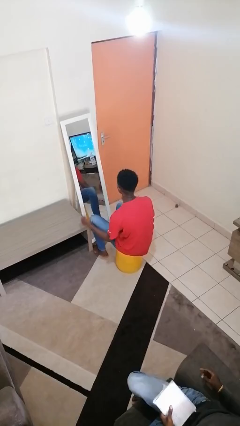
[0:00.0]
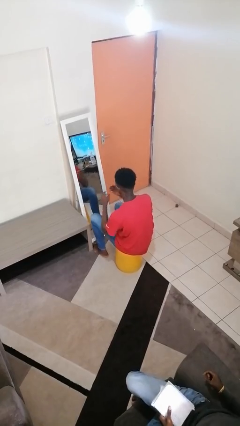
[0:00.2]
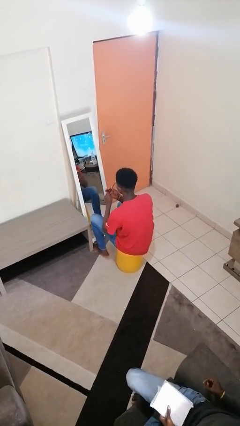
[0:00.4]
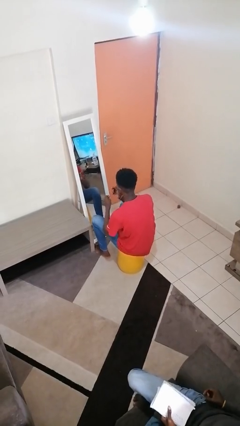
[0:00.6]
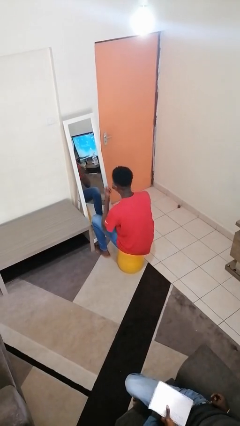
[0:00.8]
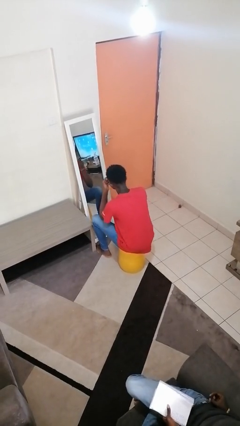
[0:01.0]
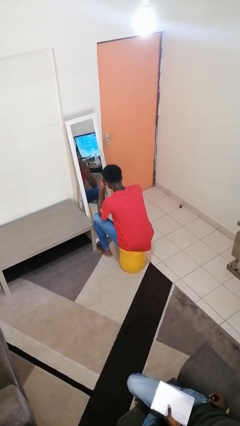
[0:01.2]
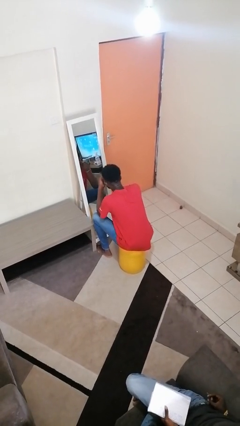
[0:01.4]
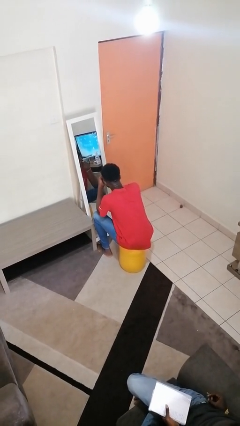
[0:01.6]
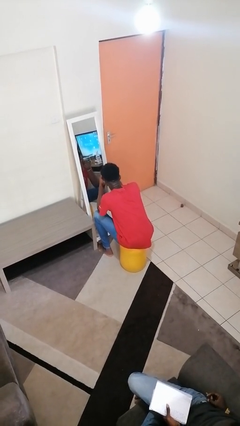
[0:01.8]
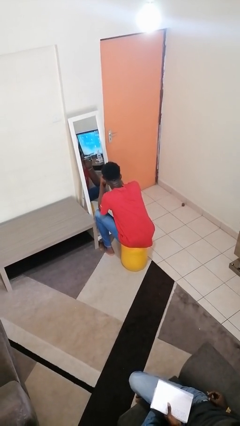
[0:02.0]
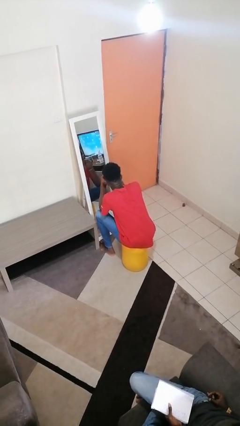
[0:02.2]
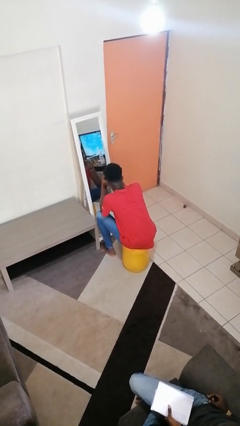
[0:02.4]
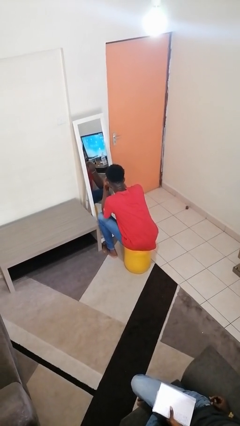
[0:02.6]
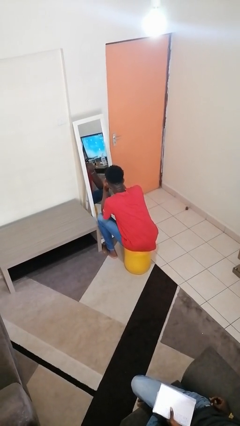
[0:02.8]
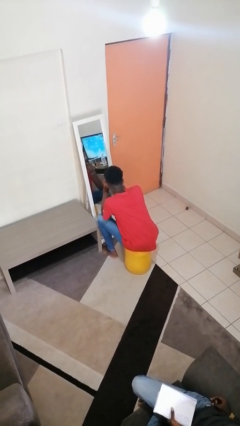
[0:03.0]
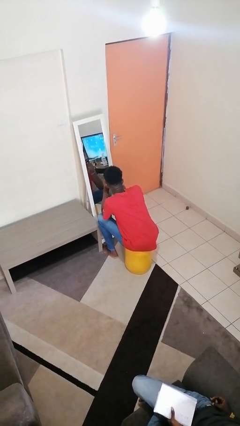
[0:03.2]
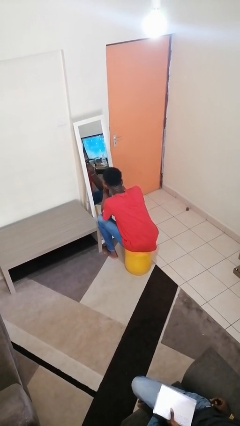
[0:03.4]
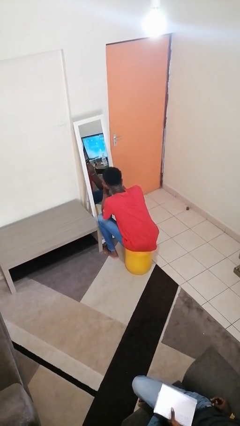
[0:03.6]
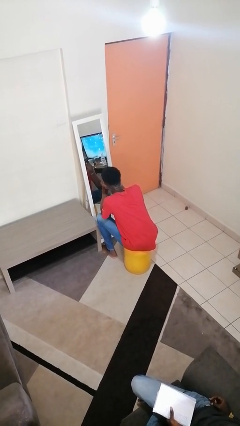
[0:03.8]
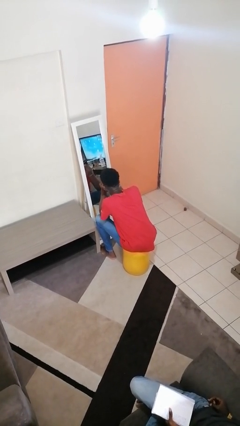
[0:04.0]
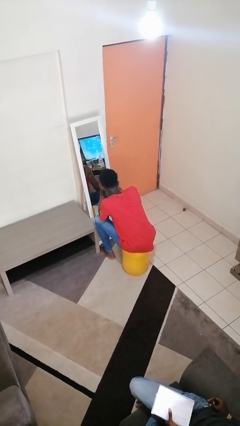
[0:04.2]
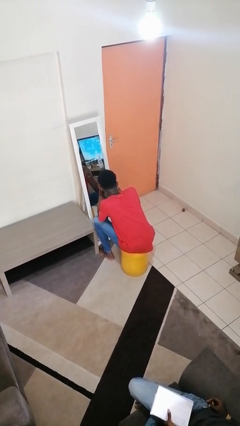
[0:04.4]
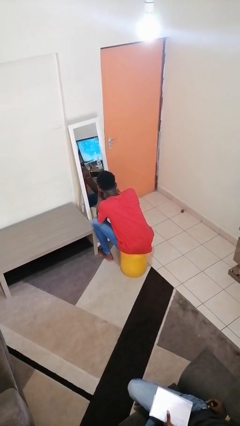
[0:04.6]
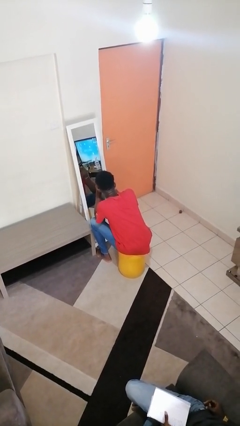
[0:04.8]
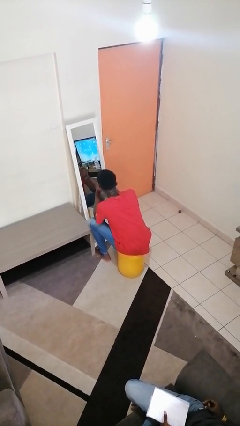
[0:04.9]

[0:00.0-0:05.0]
person applies eye makeup

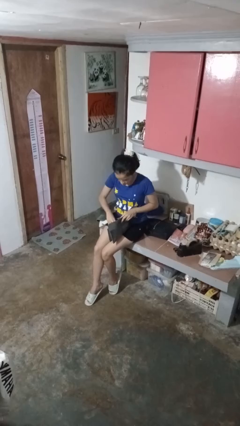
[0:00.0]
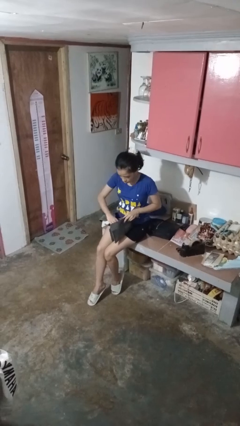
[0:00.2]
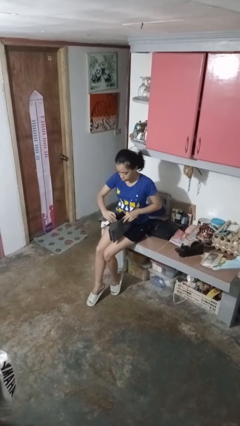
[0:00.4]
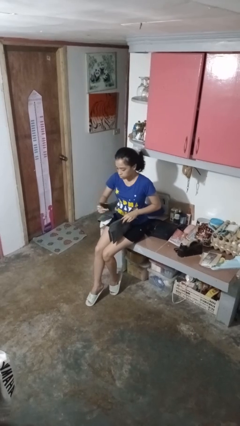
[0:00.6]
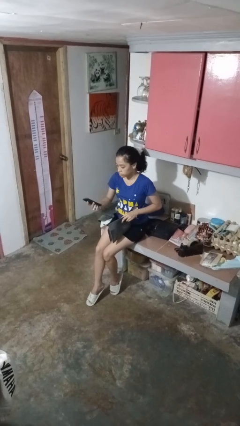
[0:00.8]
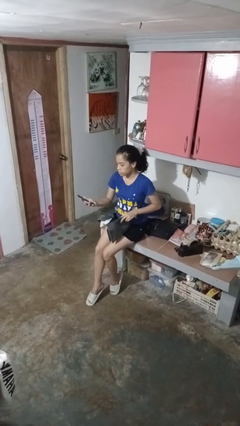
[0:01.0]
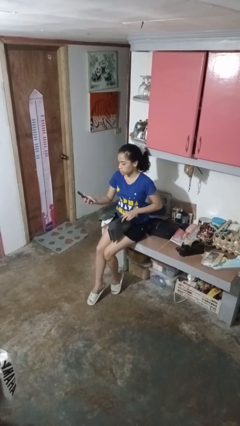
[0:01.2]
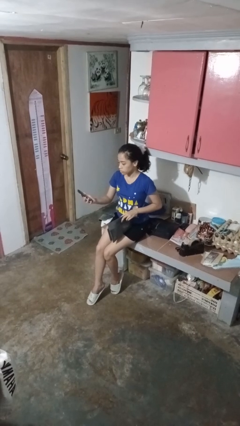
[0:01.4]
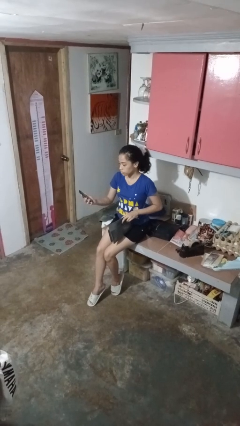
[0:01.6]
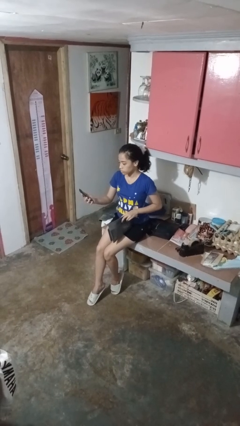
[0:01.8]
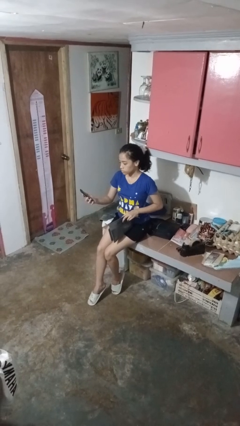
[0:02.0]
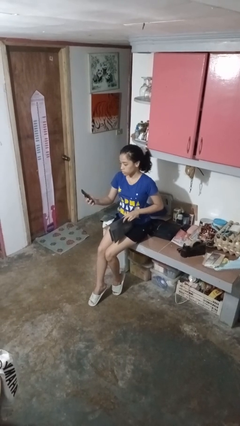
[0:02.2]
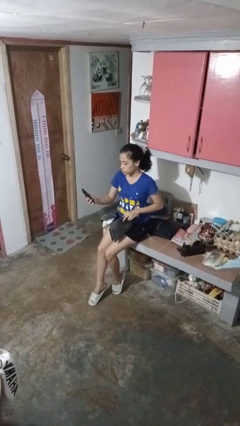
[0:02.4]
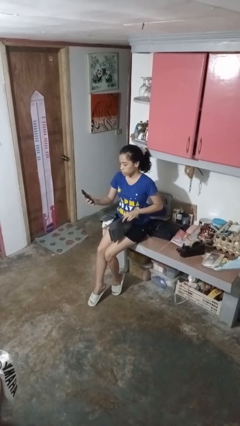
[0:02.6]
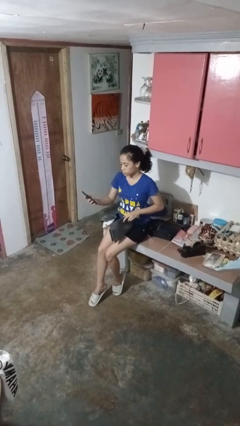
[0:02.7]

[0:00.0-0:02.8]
person takes object from purse

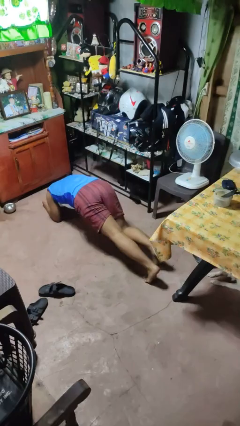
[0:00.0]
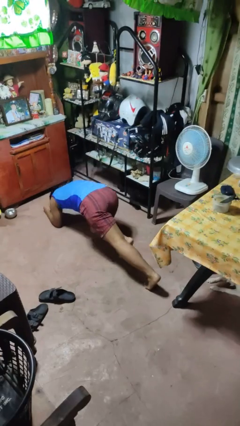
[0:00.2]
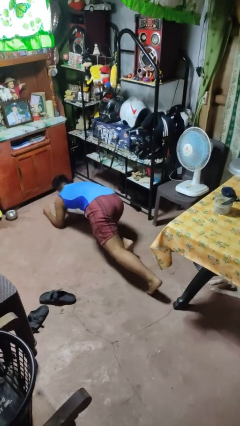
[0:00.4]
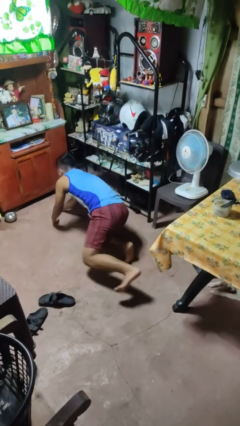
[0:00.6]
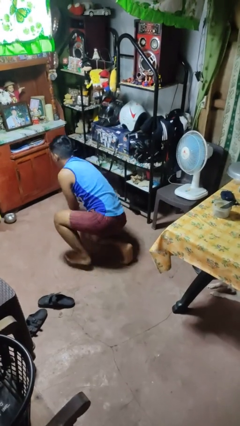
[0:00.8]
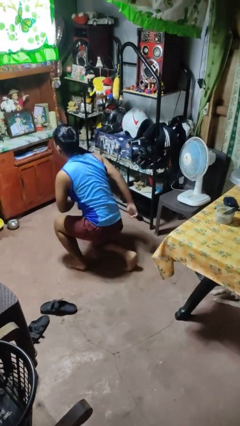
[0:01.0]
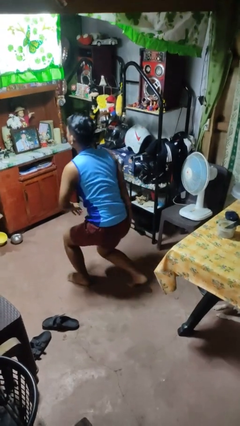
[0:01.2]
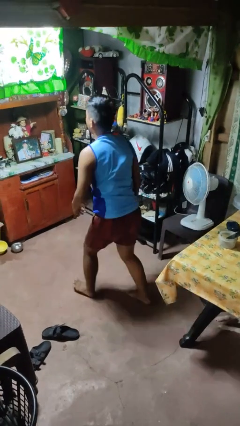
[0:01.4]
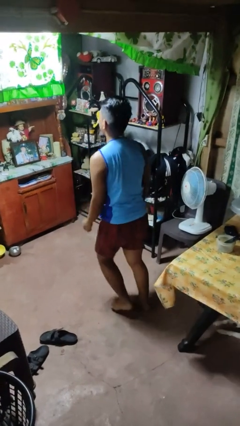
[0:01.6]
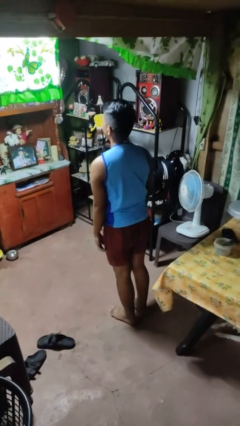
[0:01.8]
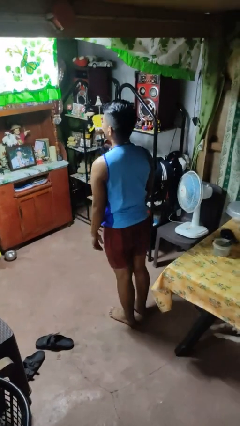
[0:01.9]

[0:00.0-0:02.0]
person stands up from floor

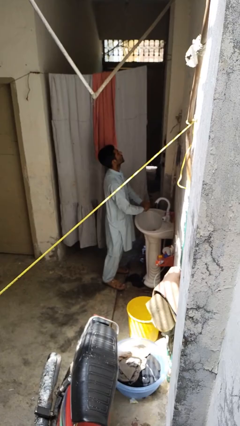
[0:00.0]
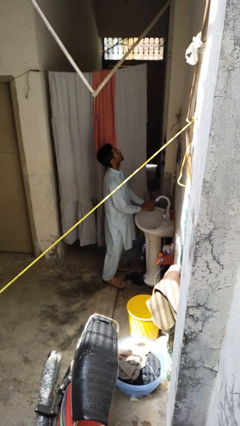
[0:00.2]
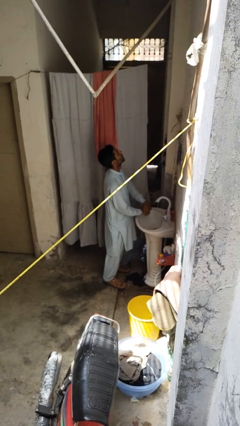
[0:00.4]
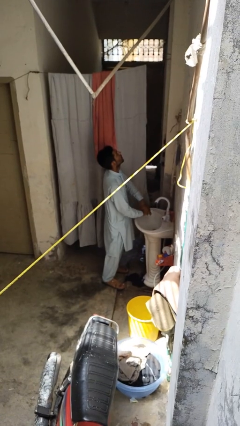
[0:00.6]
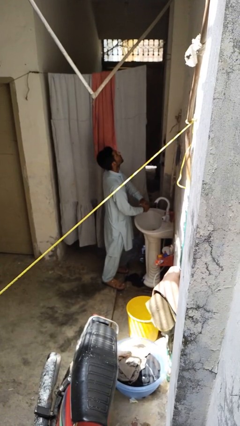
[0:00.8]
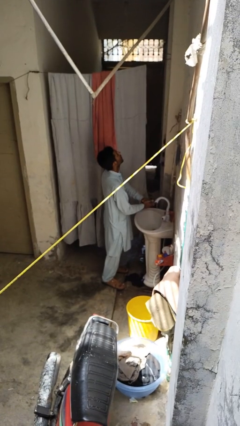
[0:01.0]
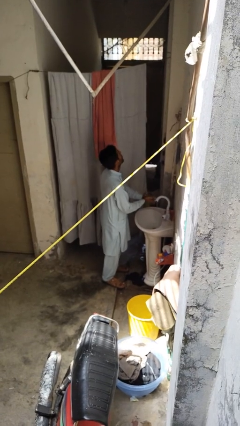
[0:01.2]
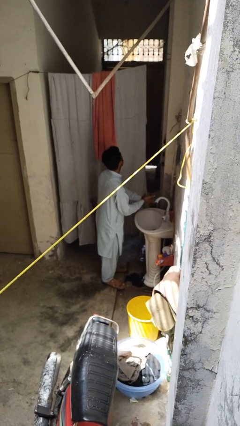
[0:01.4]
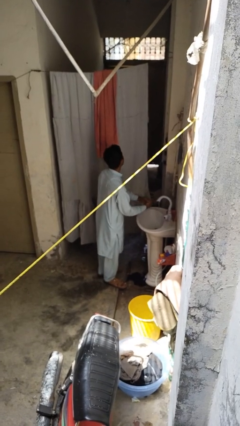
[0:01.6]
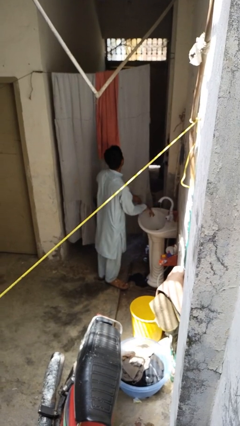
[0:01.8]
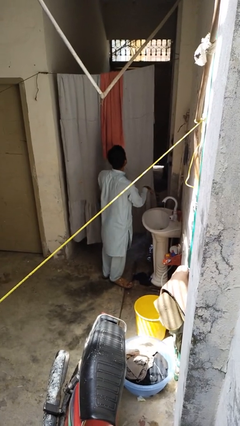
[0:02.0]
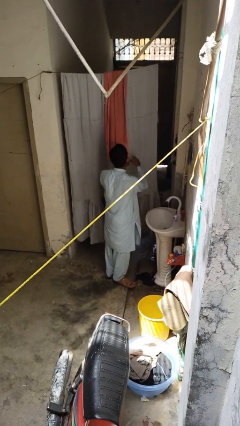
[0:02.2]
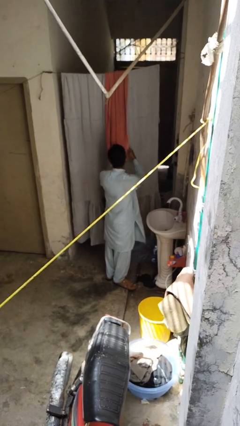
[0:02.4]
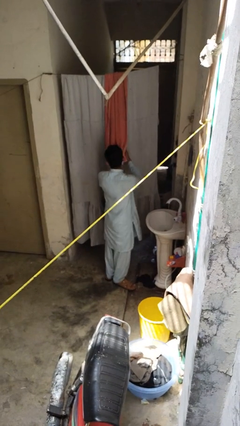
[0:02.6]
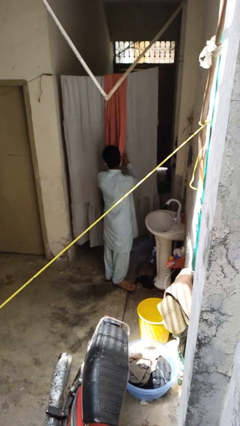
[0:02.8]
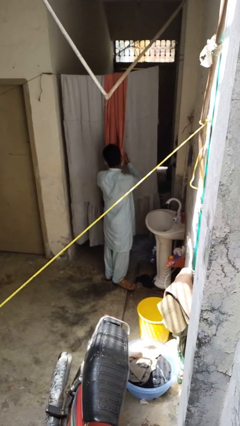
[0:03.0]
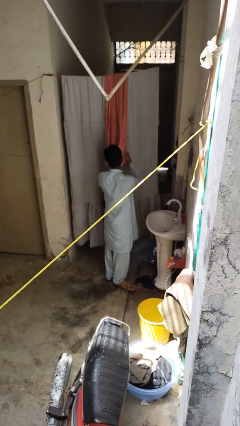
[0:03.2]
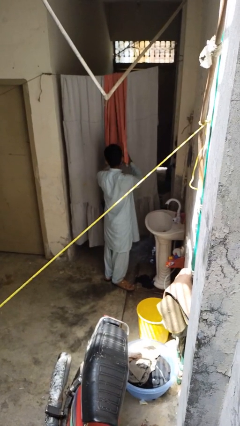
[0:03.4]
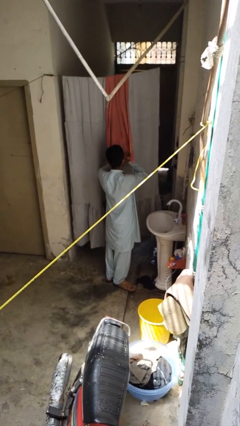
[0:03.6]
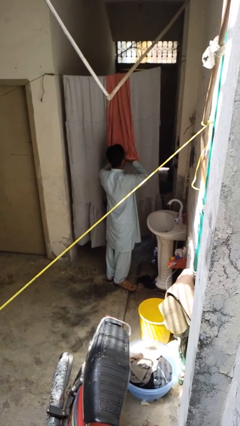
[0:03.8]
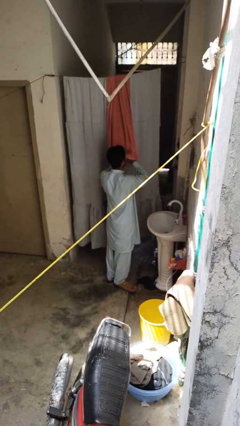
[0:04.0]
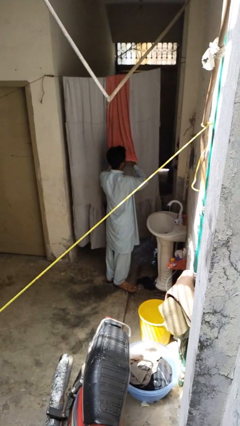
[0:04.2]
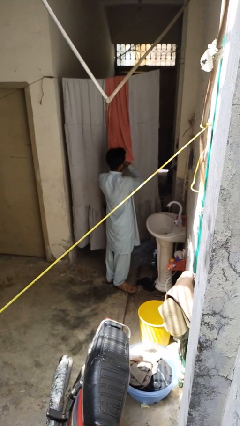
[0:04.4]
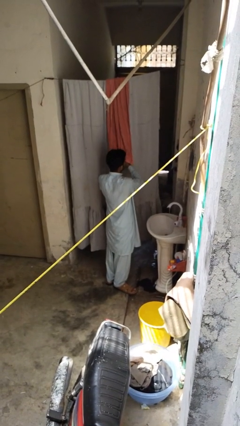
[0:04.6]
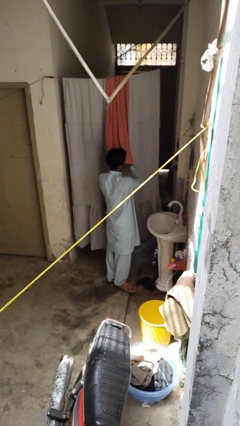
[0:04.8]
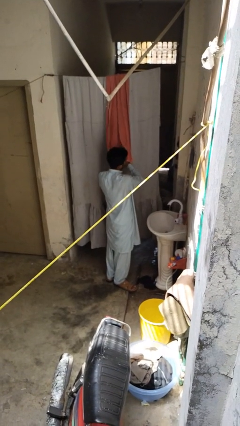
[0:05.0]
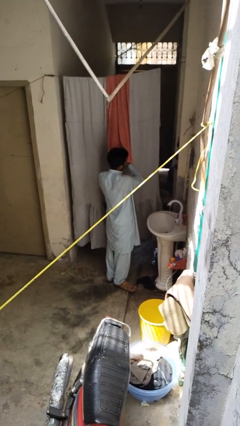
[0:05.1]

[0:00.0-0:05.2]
person dries hands with towel

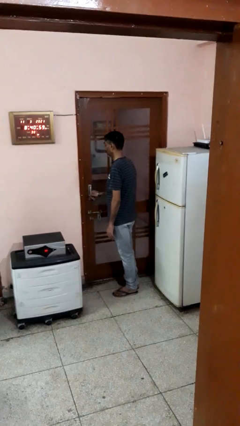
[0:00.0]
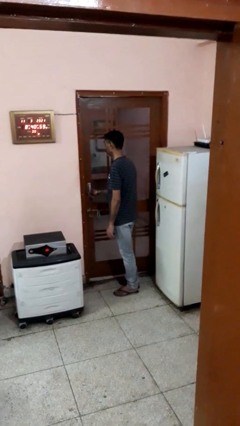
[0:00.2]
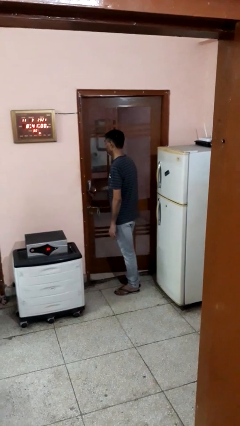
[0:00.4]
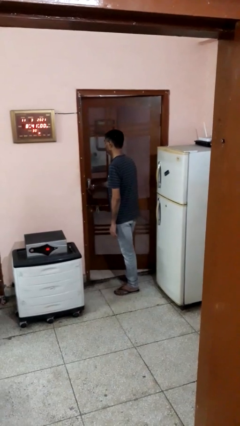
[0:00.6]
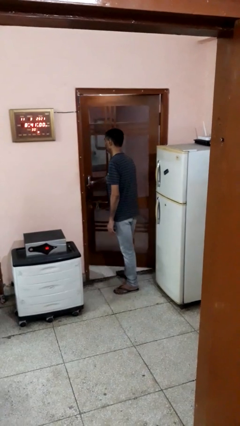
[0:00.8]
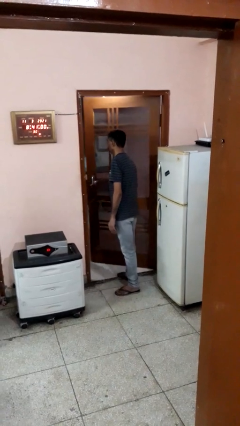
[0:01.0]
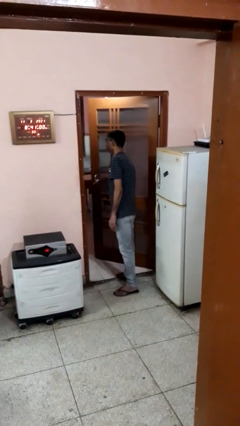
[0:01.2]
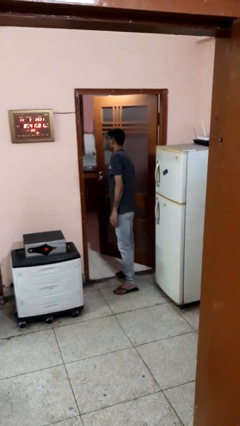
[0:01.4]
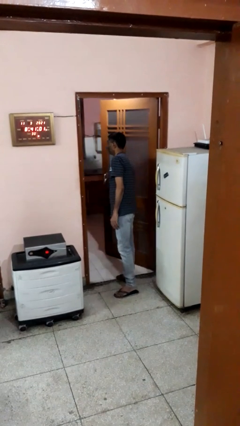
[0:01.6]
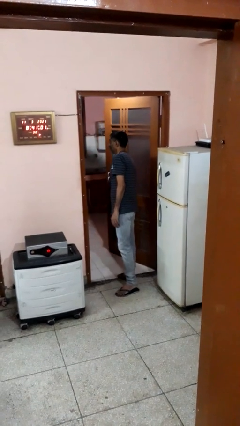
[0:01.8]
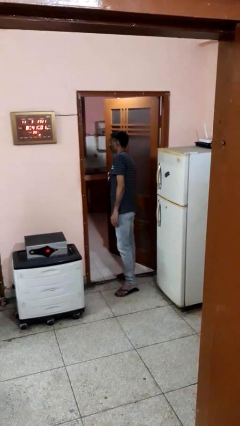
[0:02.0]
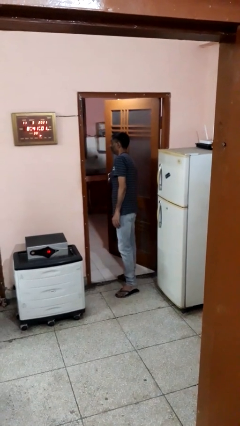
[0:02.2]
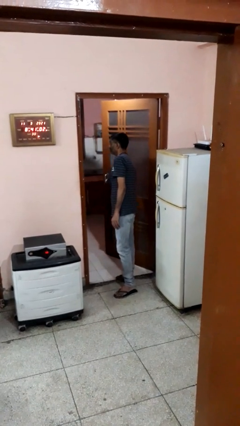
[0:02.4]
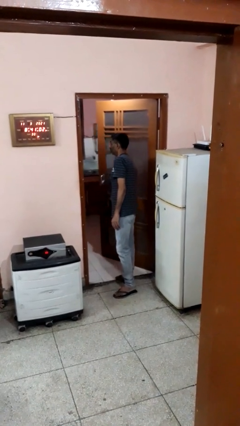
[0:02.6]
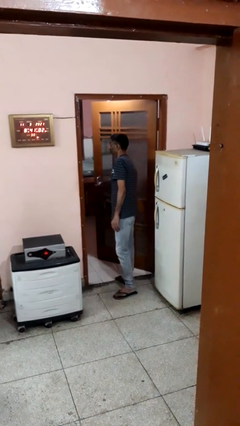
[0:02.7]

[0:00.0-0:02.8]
person opens facility door
